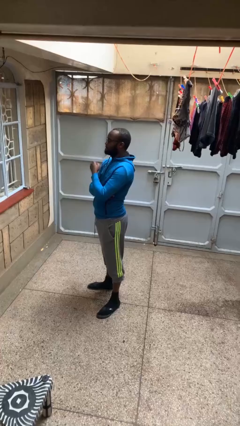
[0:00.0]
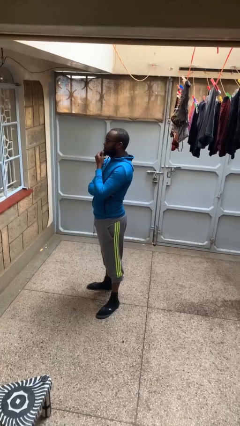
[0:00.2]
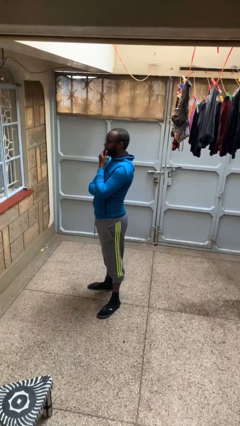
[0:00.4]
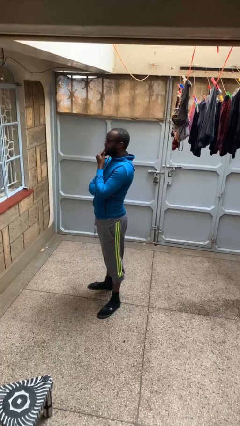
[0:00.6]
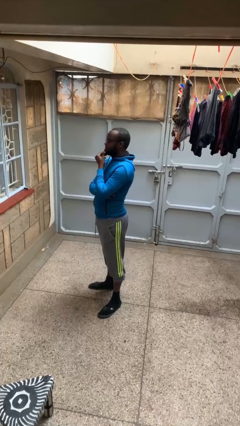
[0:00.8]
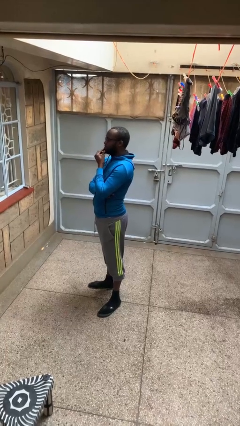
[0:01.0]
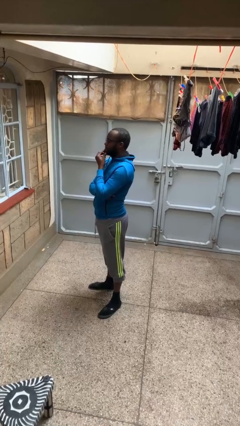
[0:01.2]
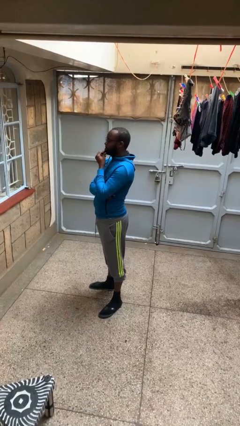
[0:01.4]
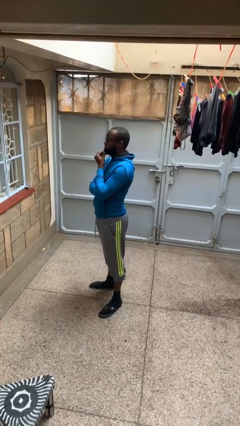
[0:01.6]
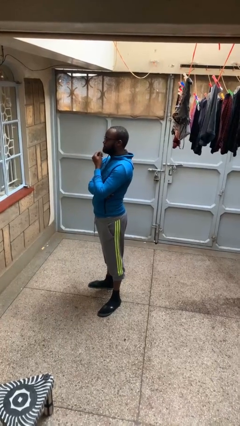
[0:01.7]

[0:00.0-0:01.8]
person strokes chin

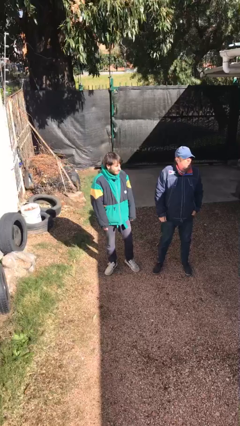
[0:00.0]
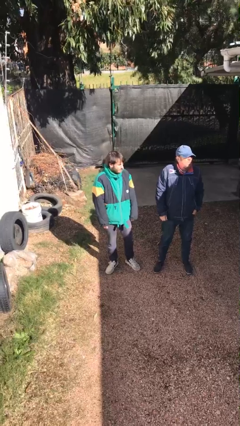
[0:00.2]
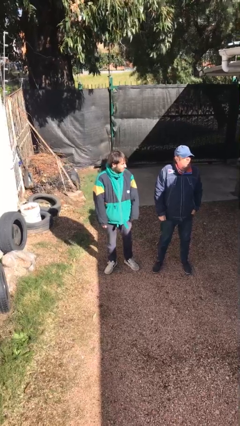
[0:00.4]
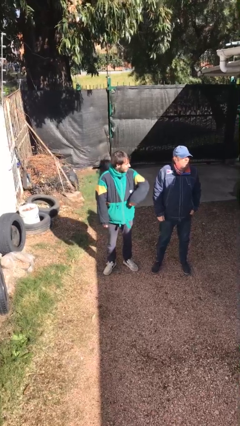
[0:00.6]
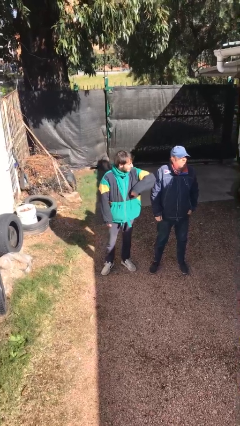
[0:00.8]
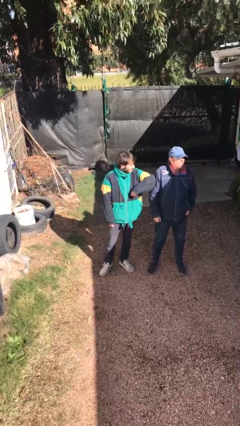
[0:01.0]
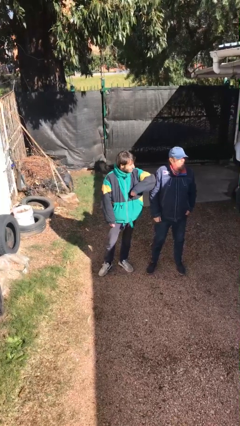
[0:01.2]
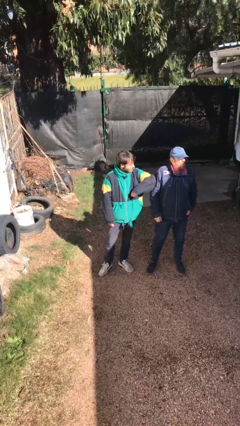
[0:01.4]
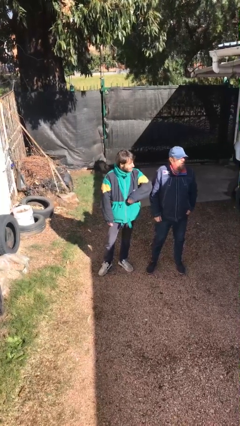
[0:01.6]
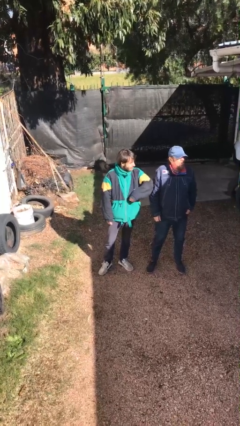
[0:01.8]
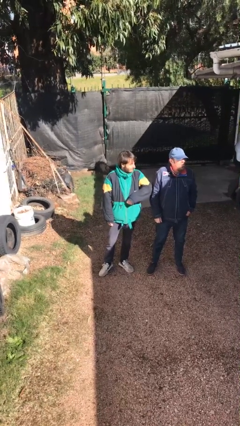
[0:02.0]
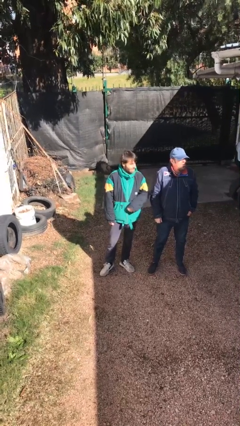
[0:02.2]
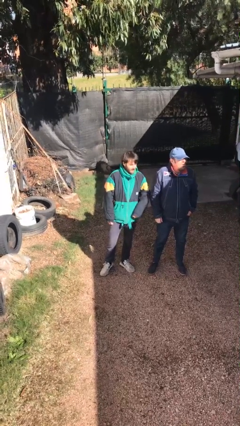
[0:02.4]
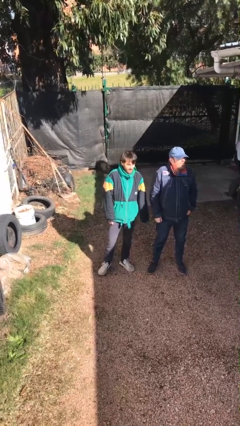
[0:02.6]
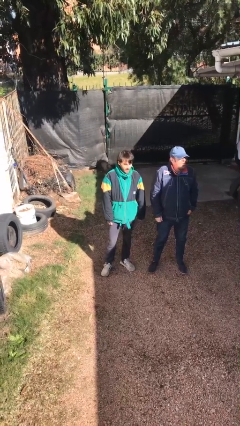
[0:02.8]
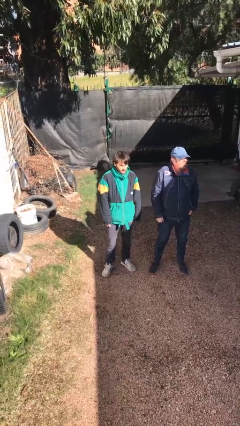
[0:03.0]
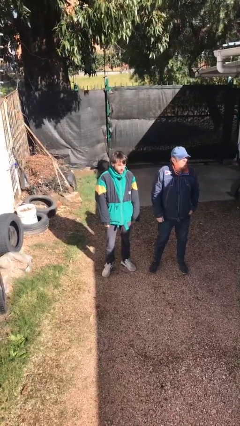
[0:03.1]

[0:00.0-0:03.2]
person nudges person with elbow

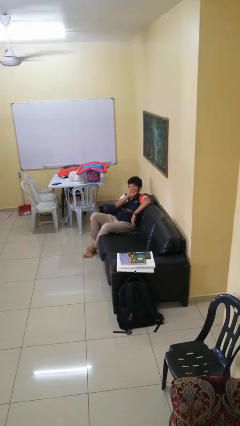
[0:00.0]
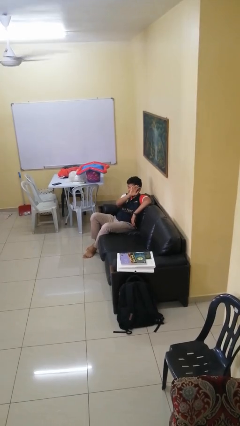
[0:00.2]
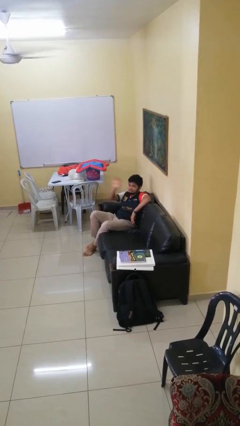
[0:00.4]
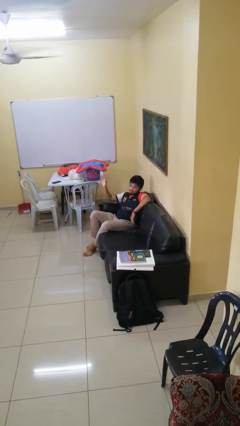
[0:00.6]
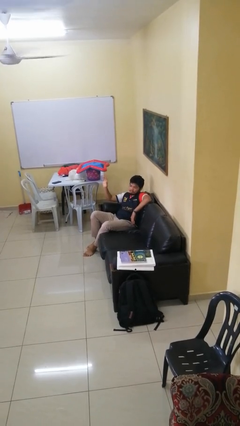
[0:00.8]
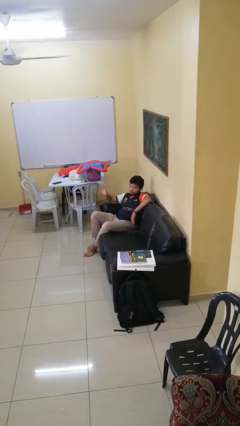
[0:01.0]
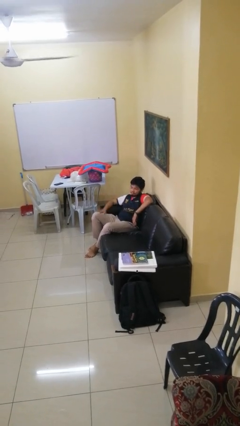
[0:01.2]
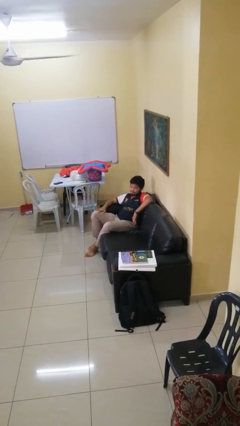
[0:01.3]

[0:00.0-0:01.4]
person gestures swipe right

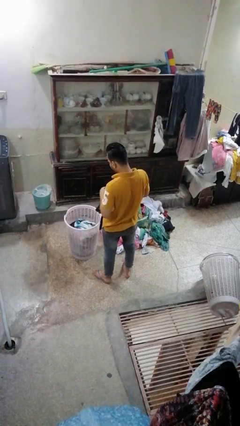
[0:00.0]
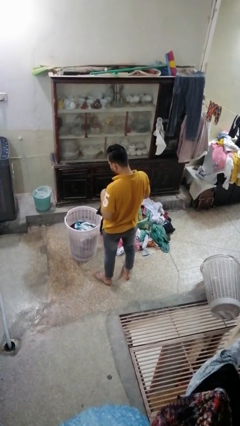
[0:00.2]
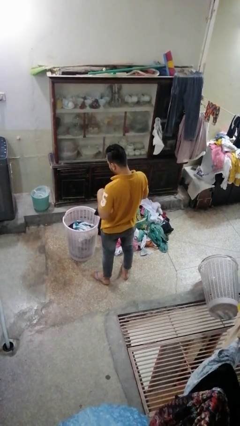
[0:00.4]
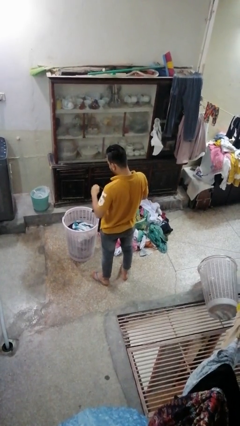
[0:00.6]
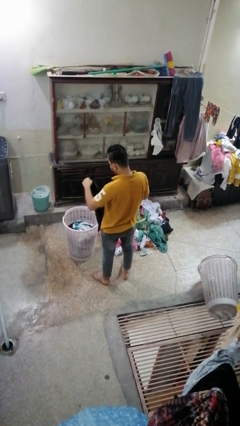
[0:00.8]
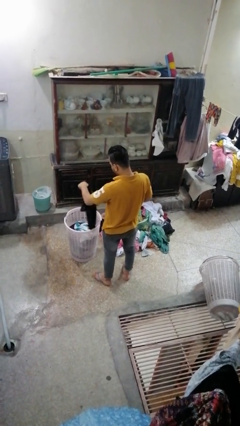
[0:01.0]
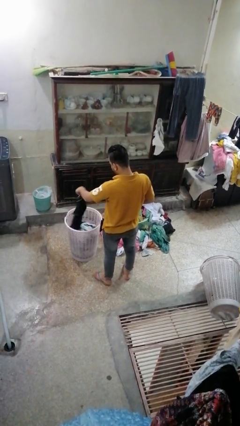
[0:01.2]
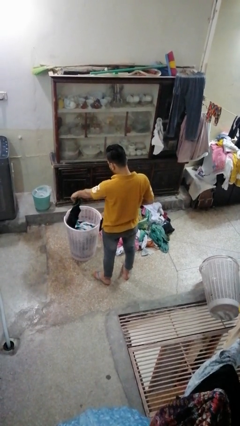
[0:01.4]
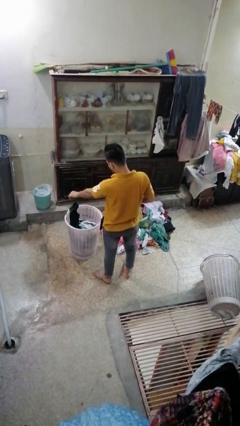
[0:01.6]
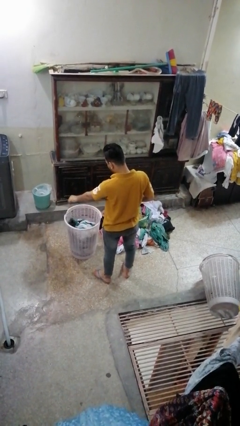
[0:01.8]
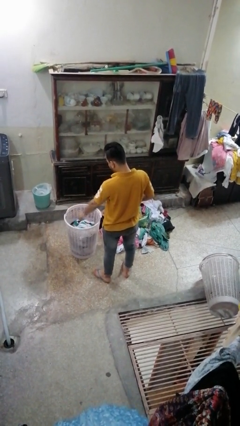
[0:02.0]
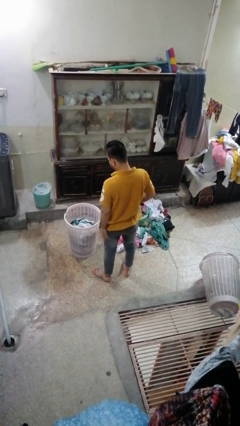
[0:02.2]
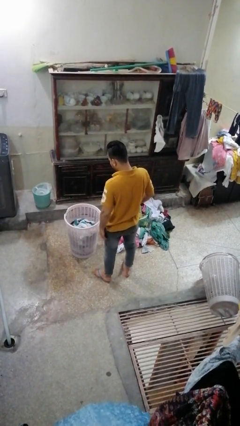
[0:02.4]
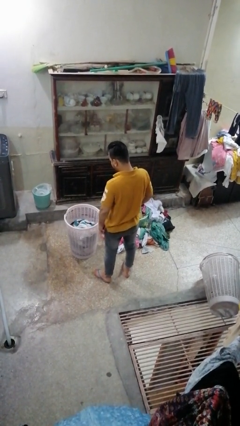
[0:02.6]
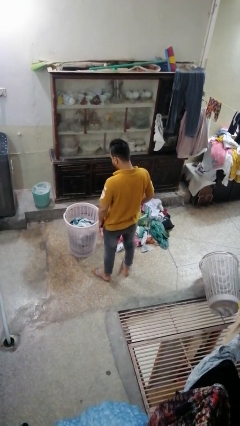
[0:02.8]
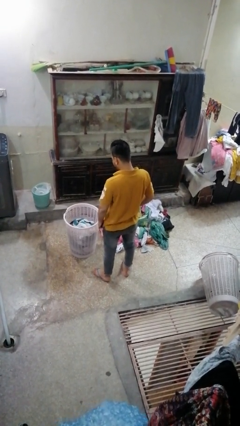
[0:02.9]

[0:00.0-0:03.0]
person puts object into basket

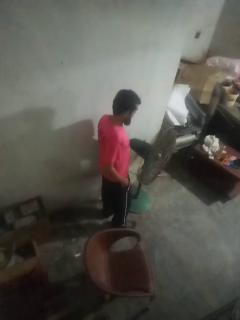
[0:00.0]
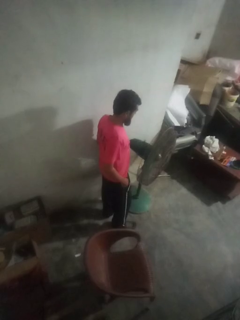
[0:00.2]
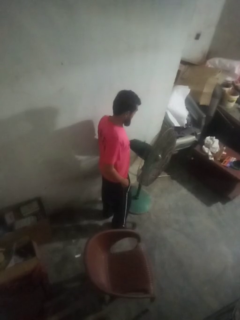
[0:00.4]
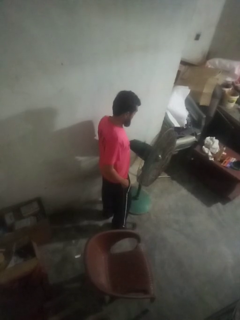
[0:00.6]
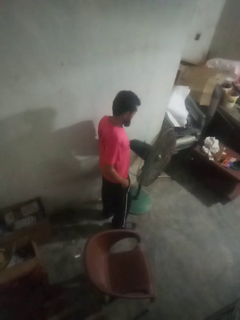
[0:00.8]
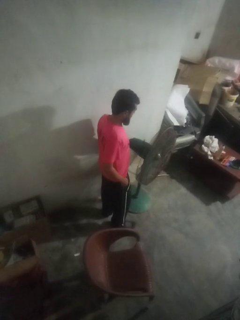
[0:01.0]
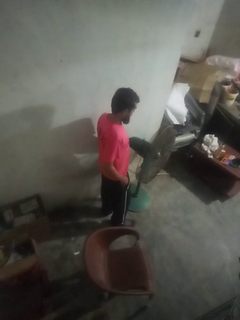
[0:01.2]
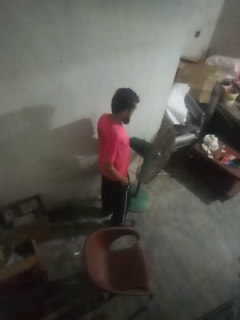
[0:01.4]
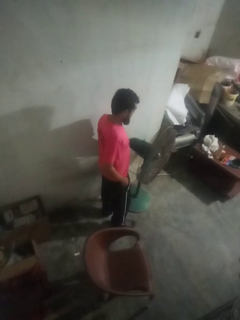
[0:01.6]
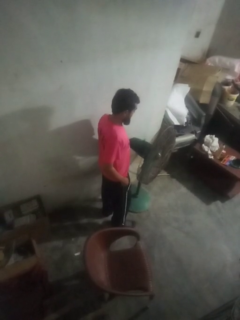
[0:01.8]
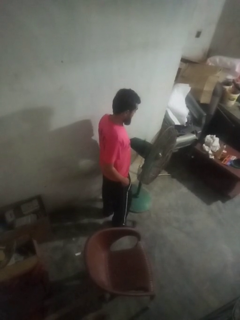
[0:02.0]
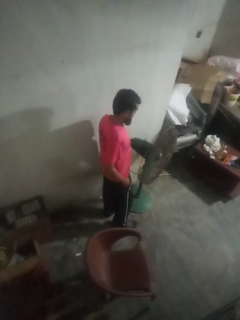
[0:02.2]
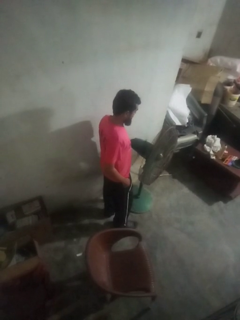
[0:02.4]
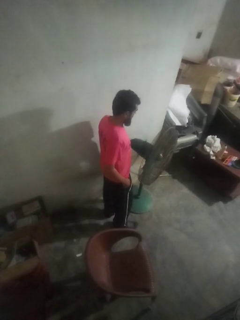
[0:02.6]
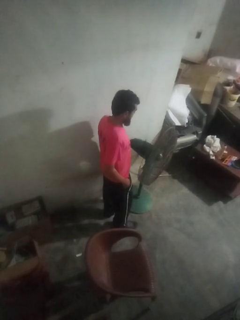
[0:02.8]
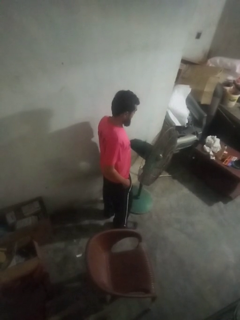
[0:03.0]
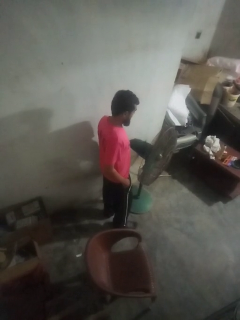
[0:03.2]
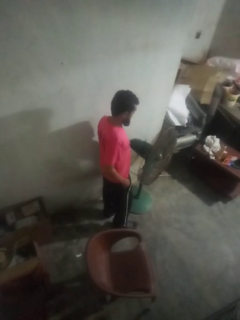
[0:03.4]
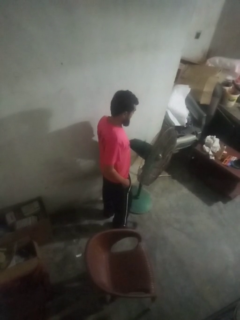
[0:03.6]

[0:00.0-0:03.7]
person turns off fan

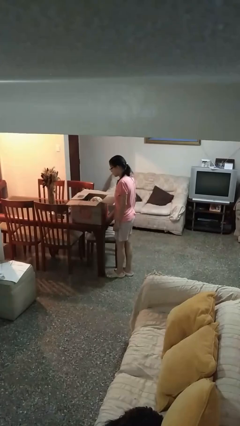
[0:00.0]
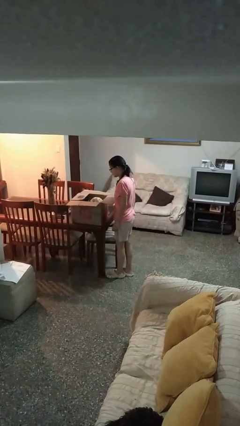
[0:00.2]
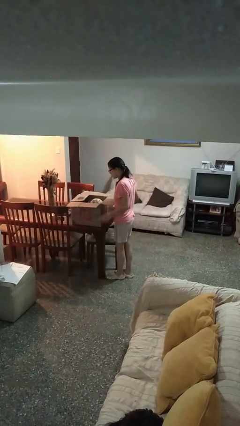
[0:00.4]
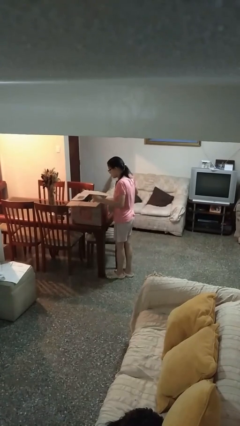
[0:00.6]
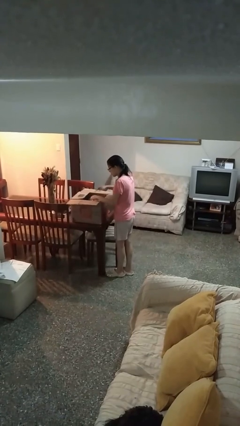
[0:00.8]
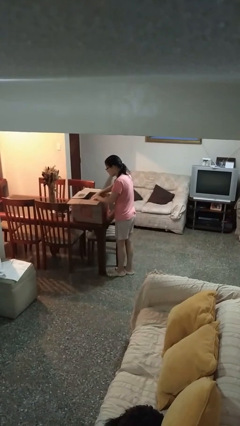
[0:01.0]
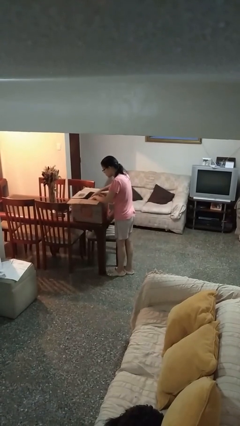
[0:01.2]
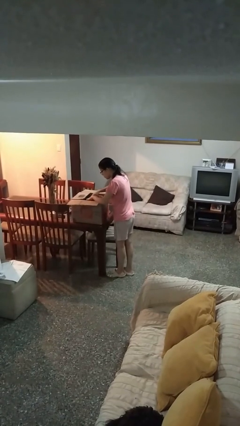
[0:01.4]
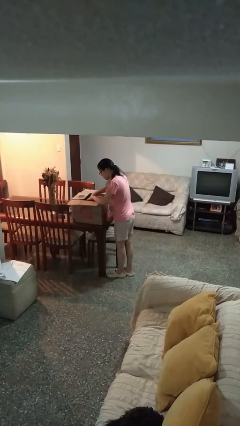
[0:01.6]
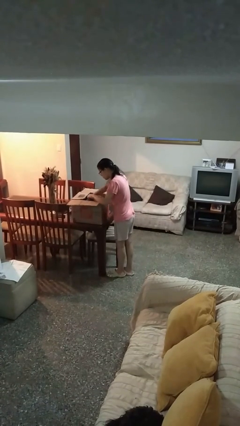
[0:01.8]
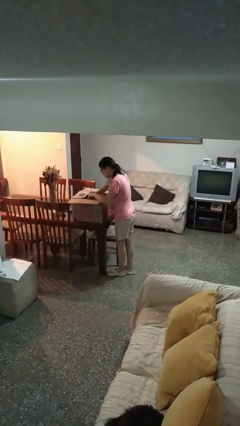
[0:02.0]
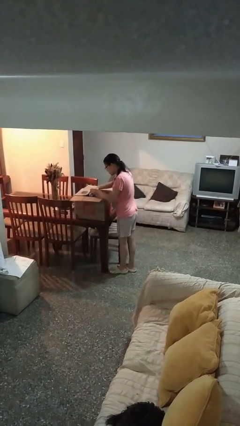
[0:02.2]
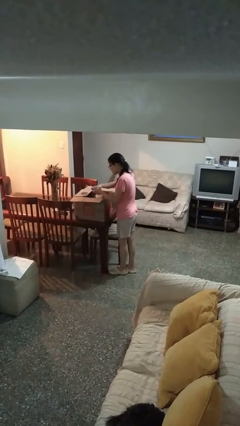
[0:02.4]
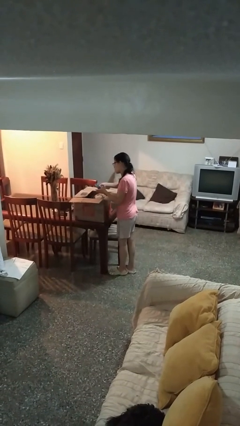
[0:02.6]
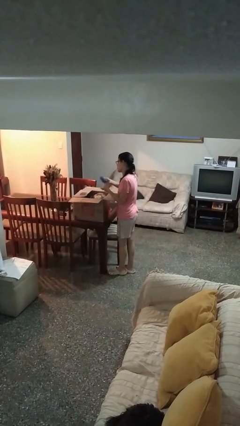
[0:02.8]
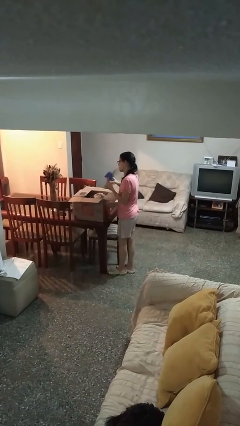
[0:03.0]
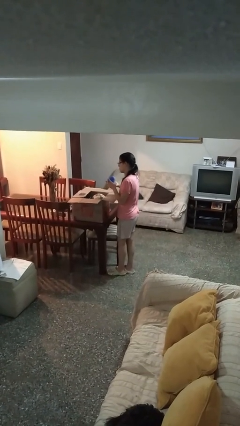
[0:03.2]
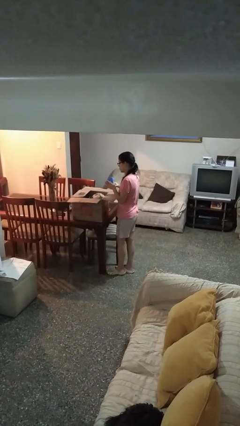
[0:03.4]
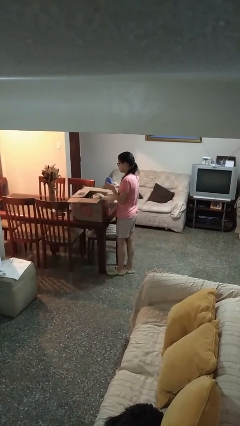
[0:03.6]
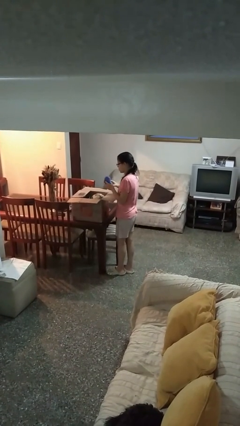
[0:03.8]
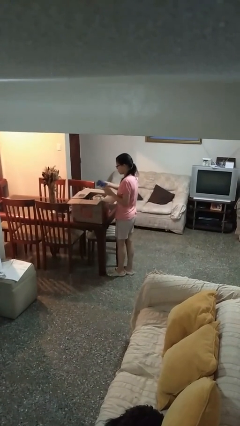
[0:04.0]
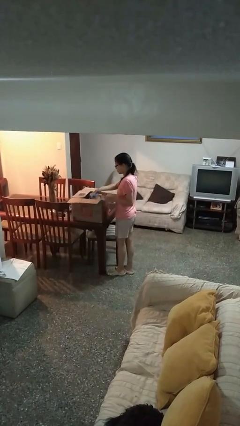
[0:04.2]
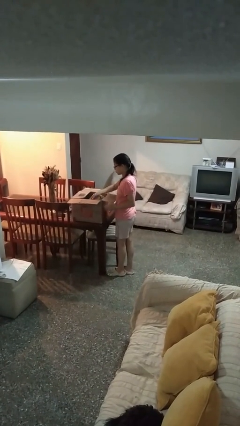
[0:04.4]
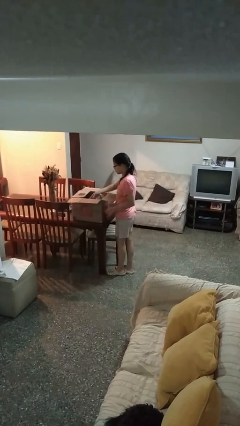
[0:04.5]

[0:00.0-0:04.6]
person searches in box

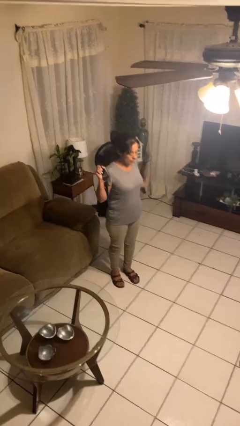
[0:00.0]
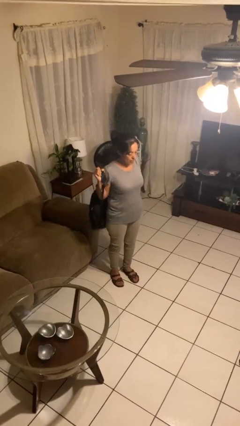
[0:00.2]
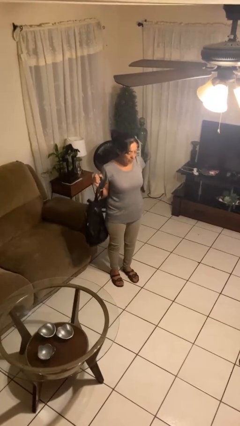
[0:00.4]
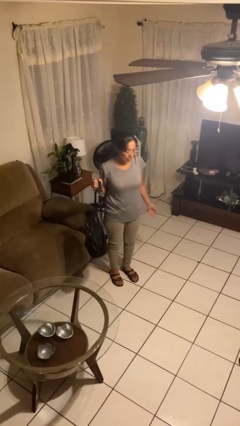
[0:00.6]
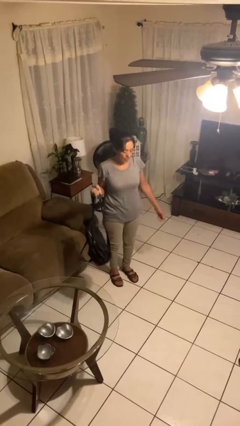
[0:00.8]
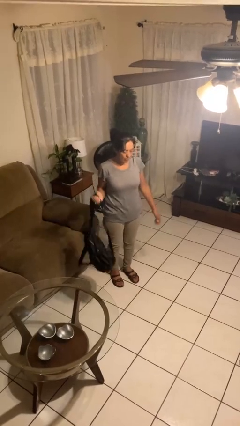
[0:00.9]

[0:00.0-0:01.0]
person takes off backpack
